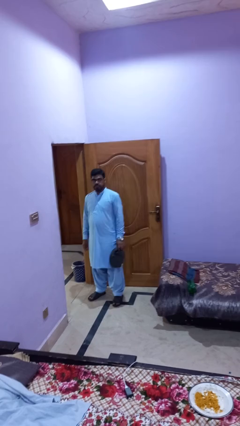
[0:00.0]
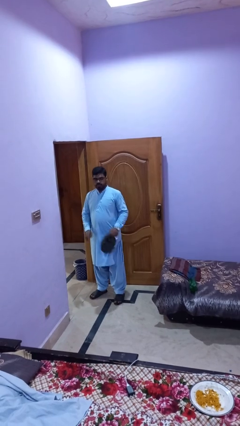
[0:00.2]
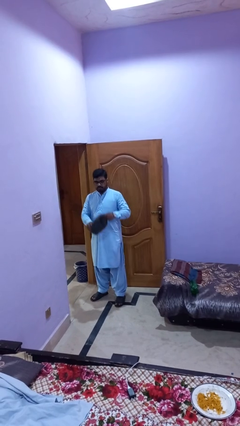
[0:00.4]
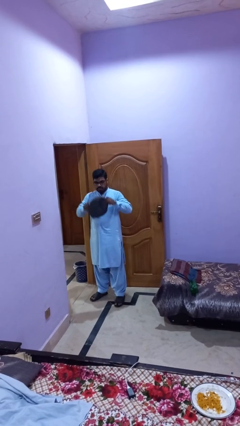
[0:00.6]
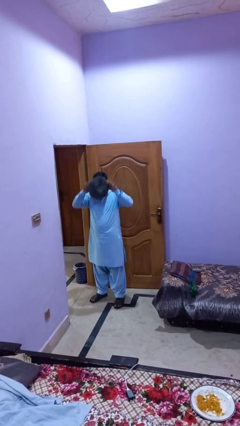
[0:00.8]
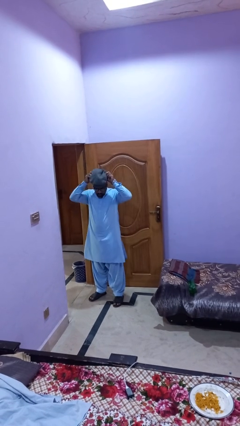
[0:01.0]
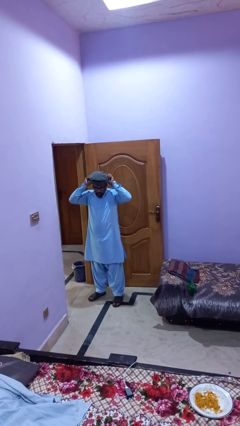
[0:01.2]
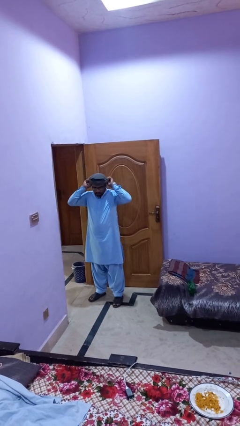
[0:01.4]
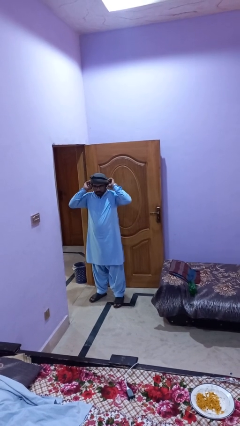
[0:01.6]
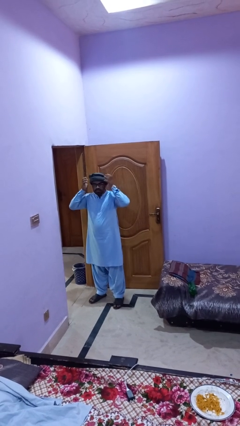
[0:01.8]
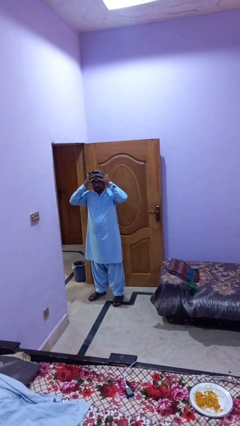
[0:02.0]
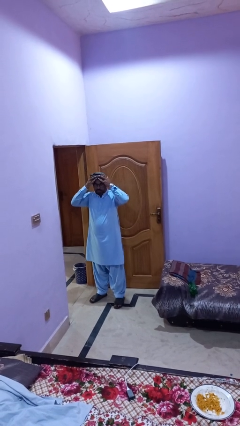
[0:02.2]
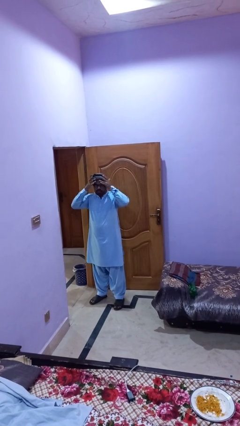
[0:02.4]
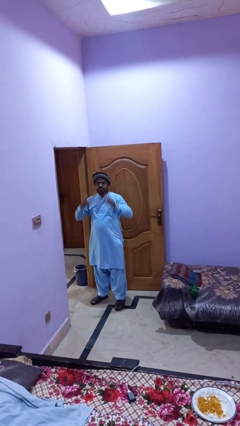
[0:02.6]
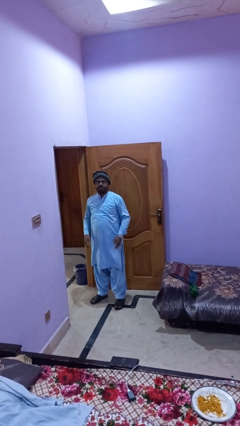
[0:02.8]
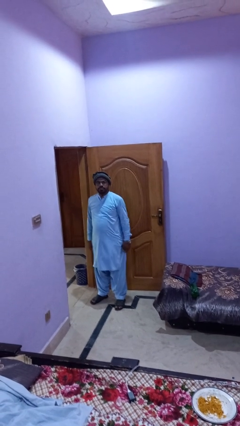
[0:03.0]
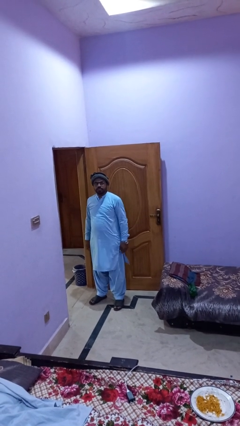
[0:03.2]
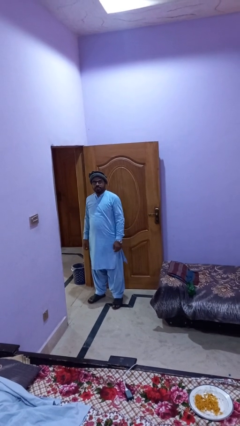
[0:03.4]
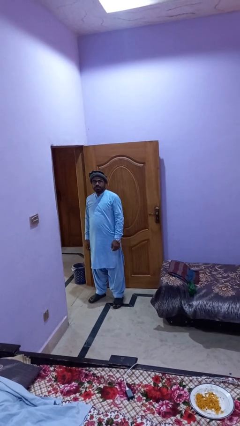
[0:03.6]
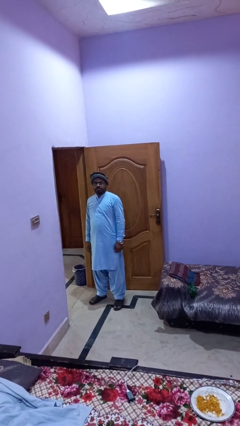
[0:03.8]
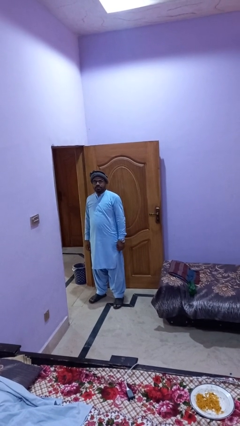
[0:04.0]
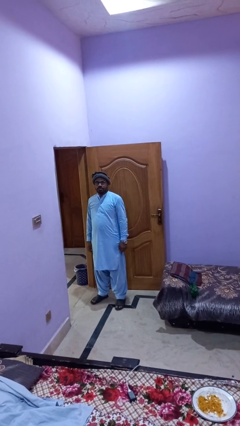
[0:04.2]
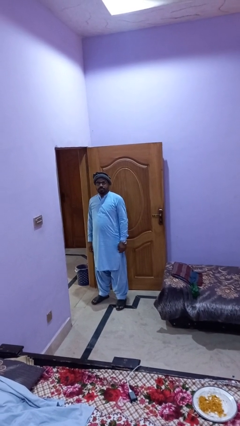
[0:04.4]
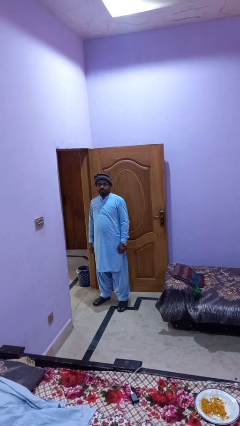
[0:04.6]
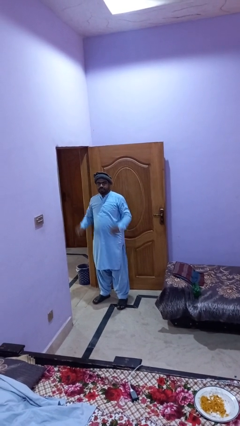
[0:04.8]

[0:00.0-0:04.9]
person puts on hat

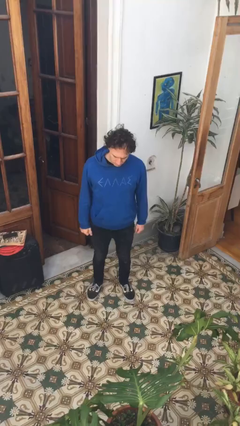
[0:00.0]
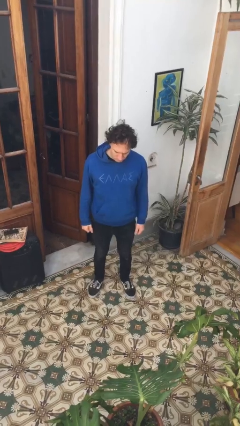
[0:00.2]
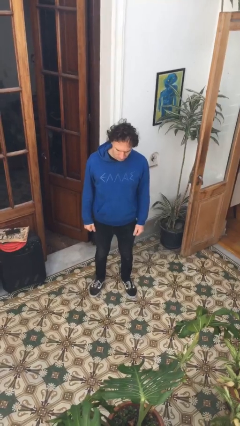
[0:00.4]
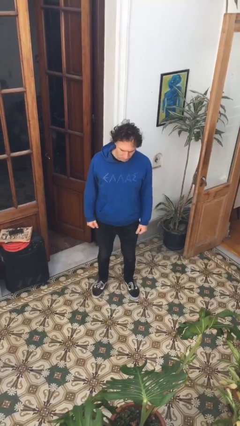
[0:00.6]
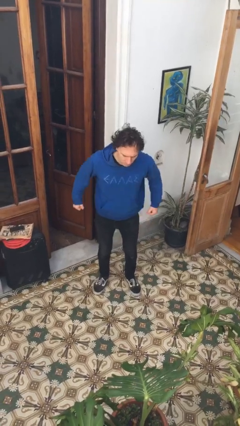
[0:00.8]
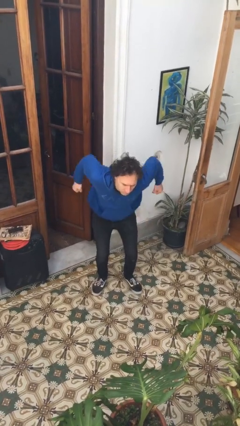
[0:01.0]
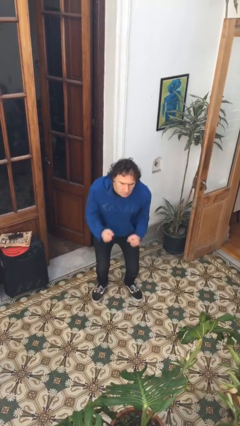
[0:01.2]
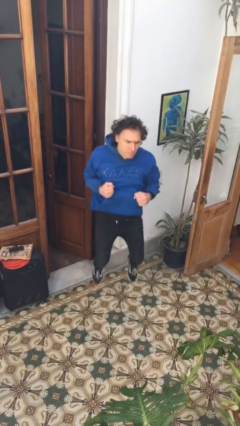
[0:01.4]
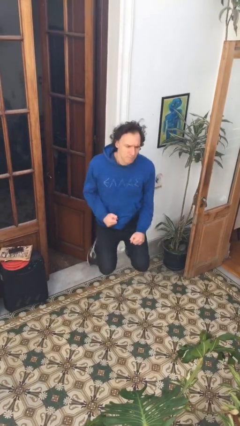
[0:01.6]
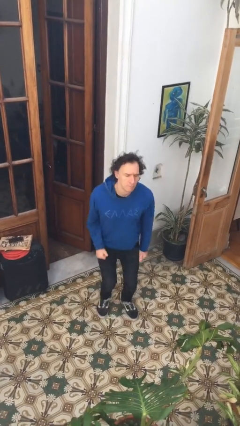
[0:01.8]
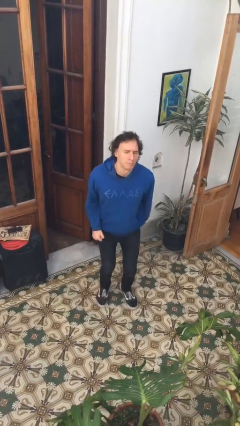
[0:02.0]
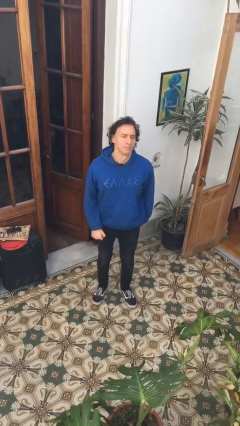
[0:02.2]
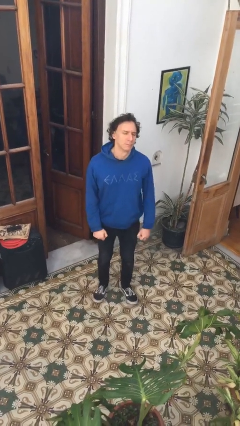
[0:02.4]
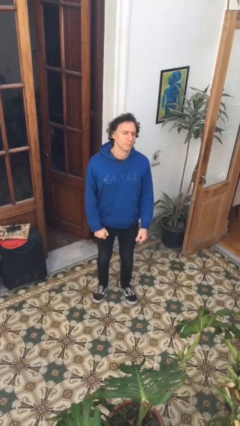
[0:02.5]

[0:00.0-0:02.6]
person jumps

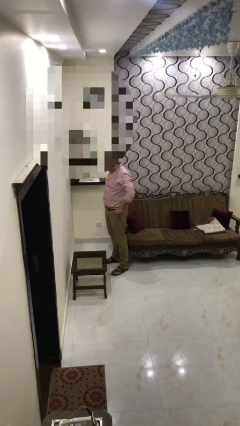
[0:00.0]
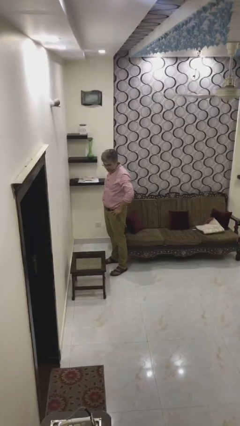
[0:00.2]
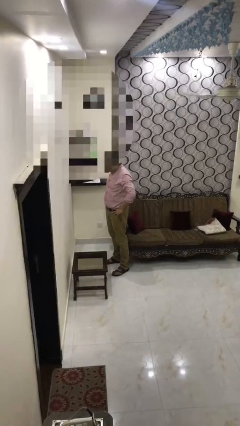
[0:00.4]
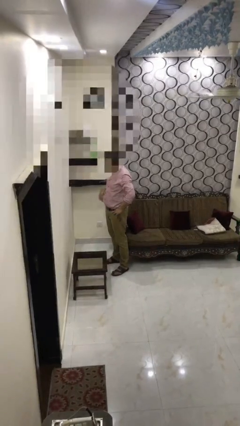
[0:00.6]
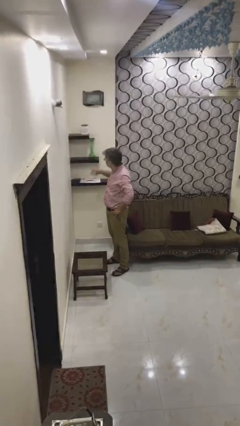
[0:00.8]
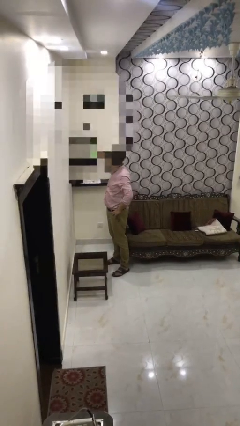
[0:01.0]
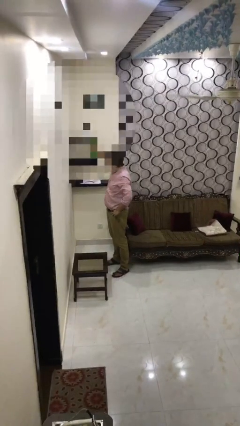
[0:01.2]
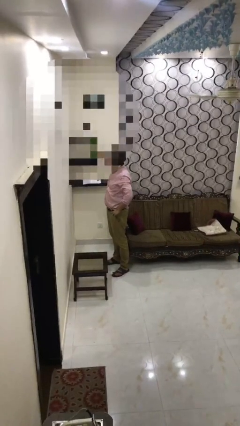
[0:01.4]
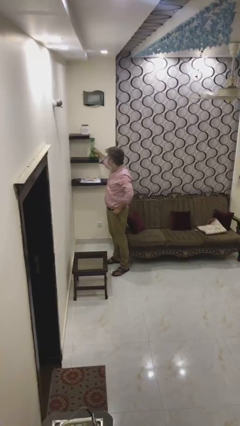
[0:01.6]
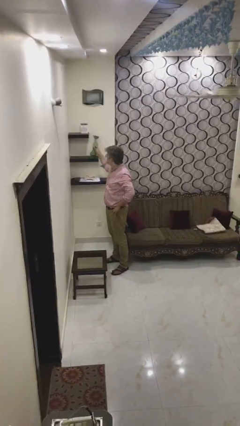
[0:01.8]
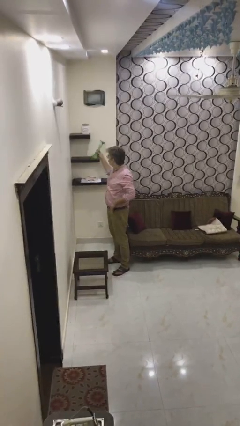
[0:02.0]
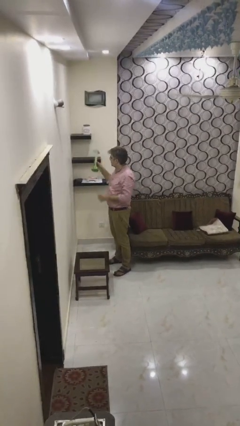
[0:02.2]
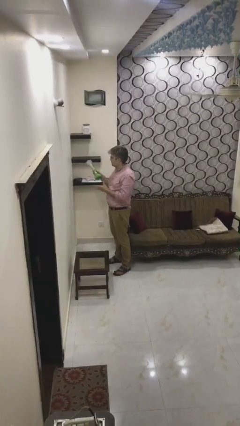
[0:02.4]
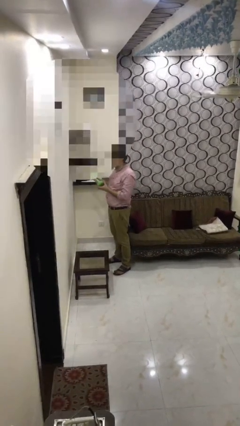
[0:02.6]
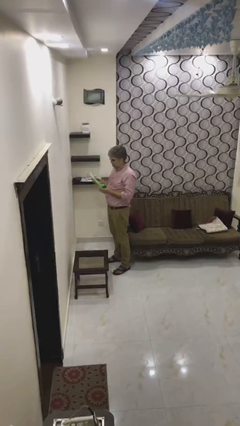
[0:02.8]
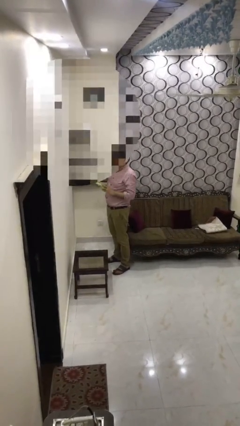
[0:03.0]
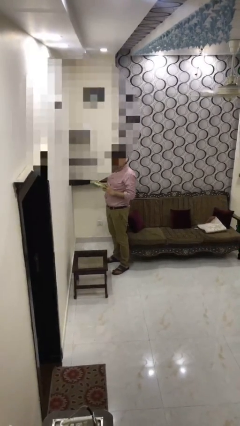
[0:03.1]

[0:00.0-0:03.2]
person picks up object from shelf

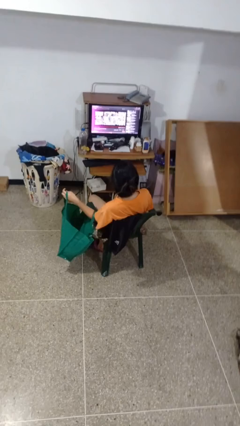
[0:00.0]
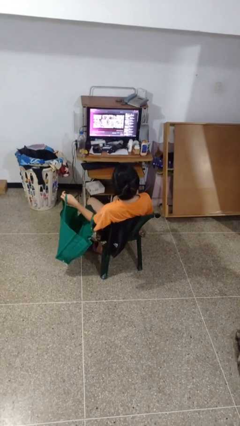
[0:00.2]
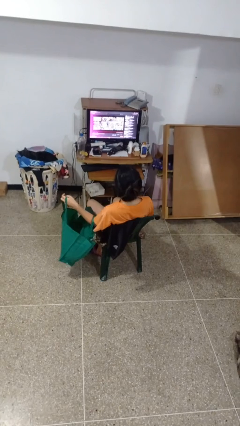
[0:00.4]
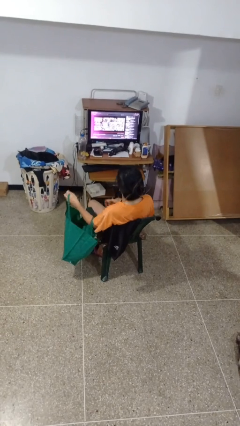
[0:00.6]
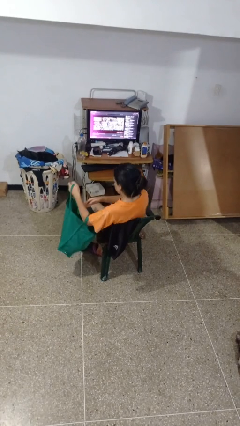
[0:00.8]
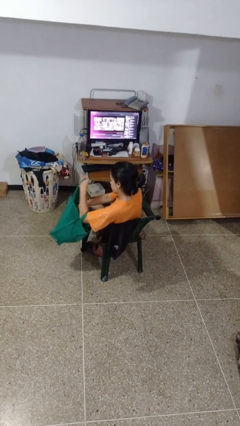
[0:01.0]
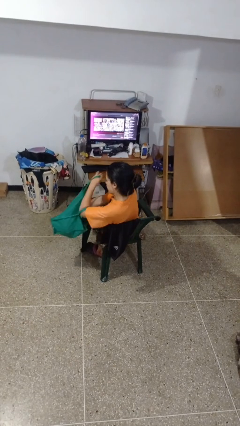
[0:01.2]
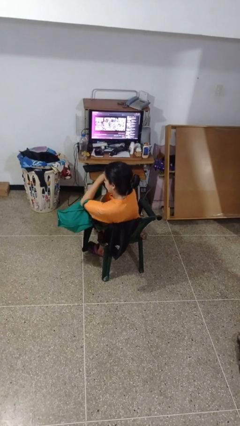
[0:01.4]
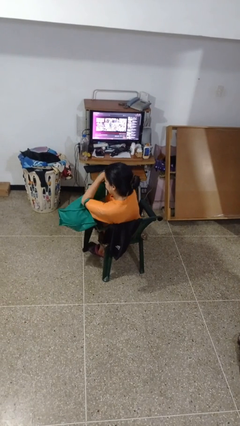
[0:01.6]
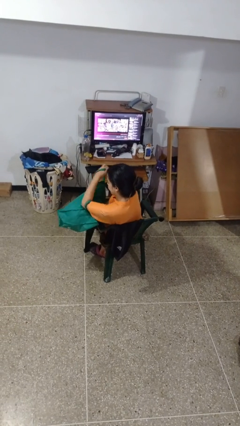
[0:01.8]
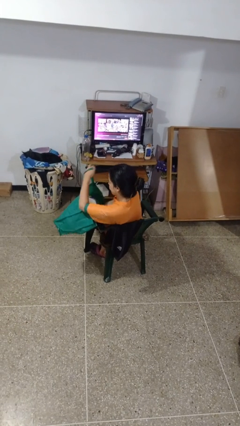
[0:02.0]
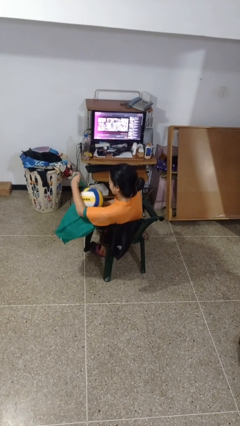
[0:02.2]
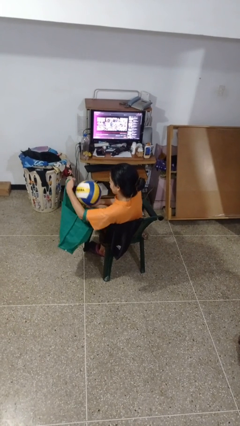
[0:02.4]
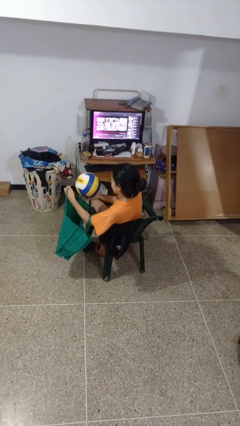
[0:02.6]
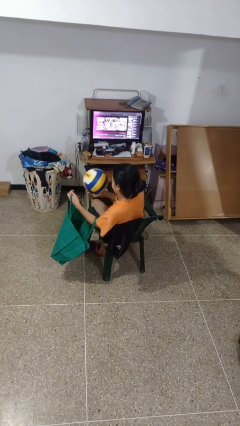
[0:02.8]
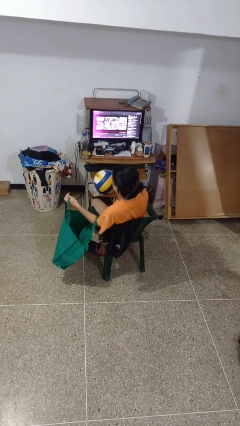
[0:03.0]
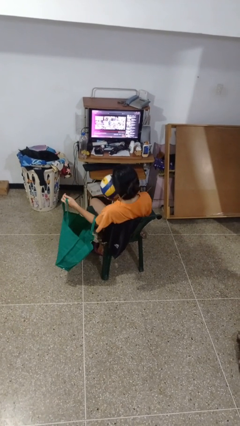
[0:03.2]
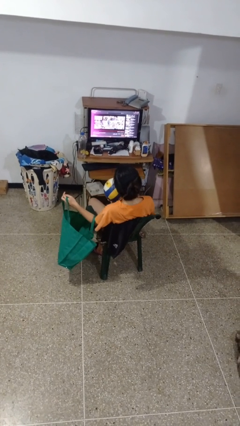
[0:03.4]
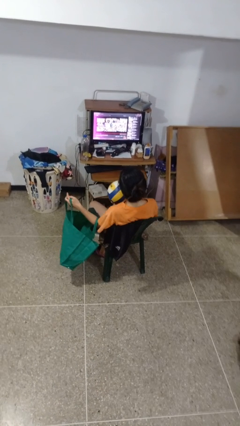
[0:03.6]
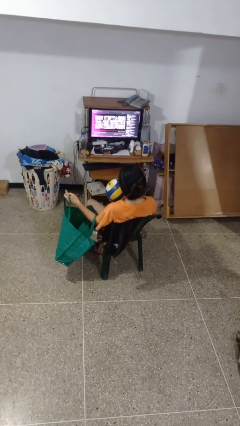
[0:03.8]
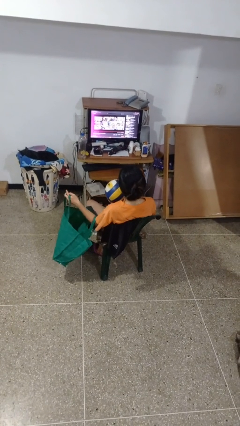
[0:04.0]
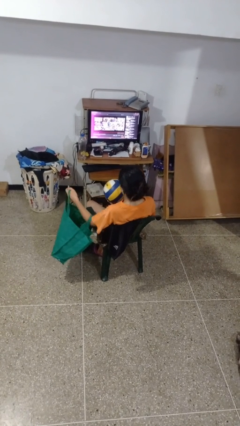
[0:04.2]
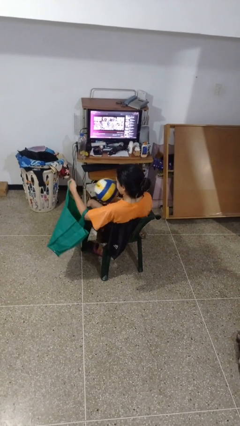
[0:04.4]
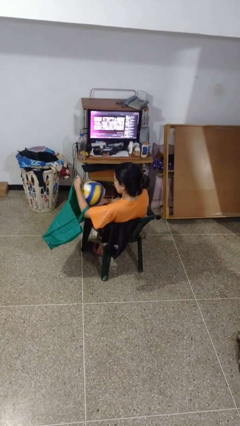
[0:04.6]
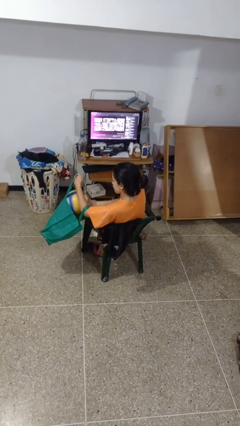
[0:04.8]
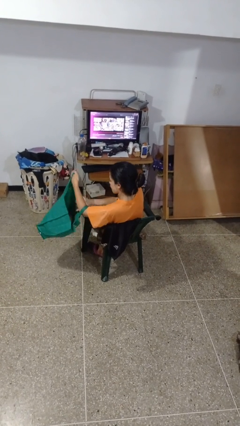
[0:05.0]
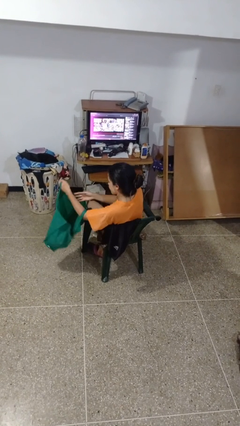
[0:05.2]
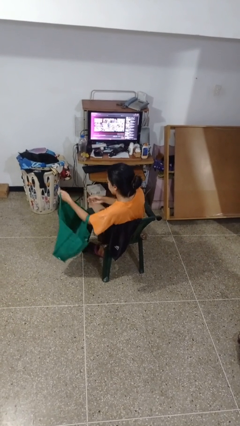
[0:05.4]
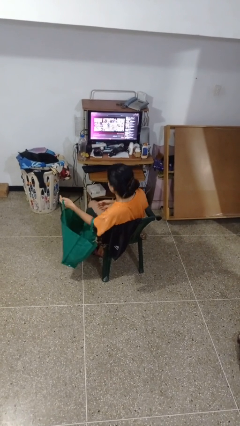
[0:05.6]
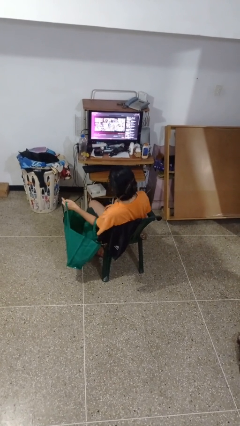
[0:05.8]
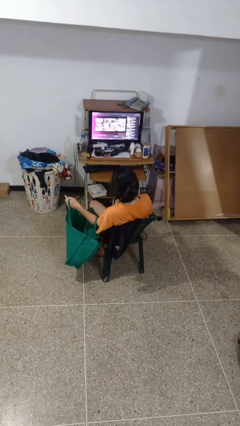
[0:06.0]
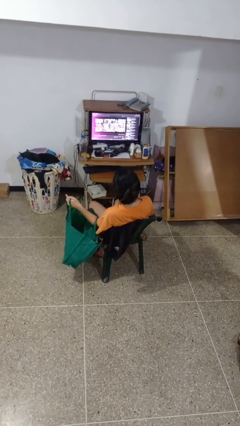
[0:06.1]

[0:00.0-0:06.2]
person takes object from bag

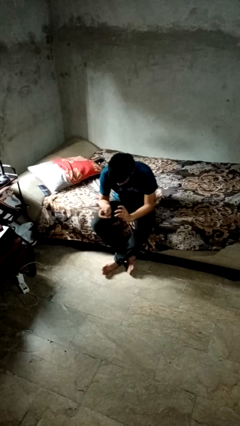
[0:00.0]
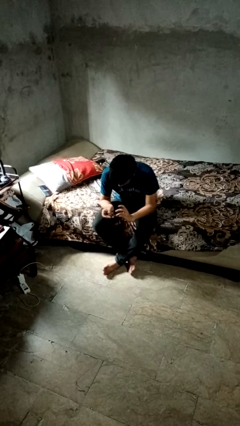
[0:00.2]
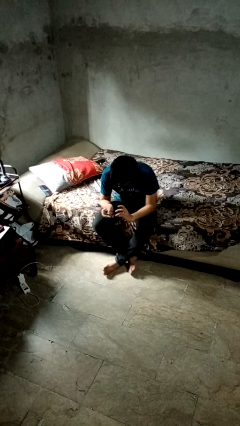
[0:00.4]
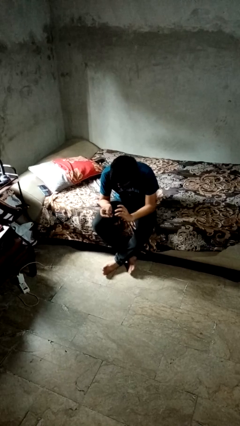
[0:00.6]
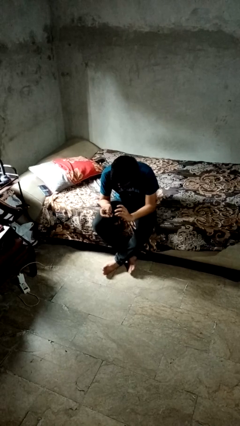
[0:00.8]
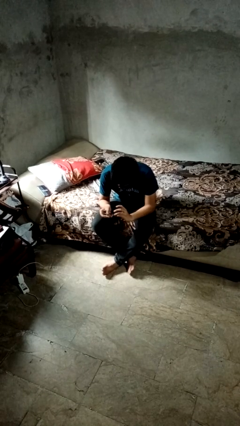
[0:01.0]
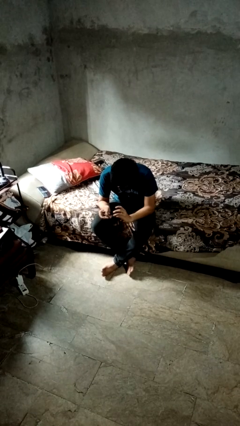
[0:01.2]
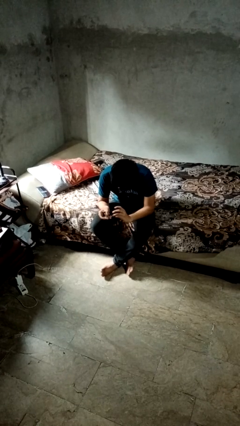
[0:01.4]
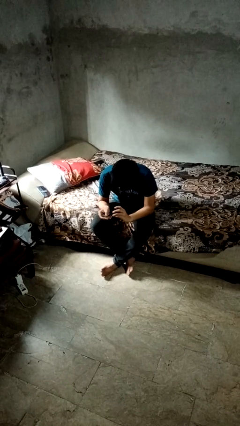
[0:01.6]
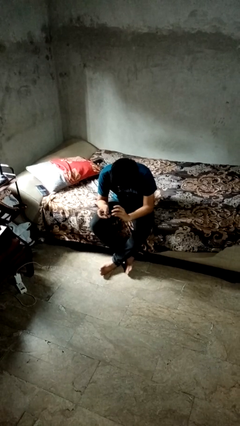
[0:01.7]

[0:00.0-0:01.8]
person clips fingernails
